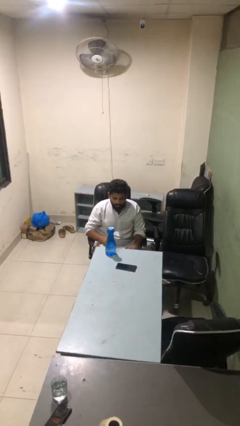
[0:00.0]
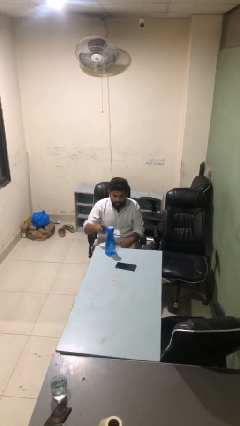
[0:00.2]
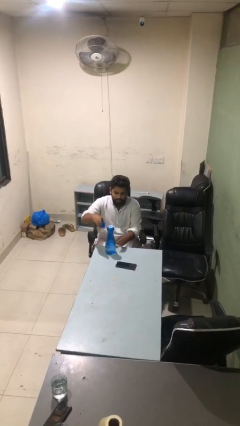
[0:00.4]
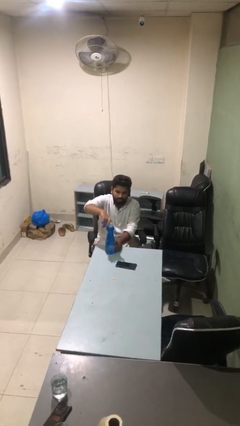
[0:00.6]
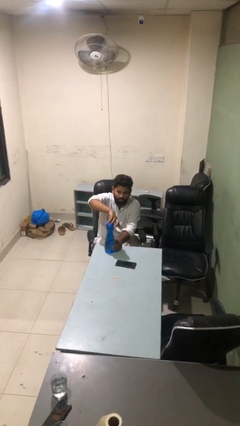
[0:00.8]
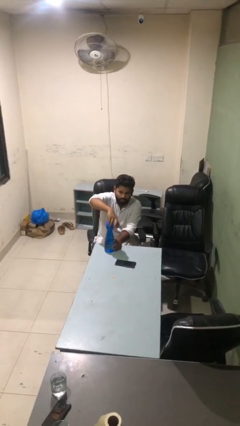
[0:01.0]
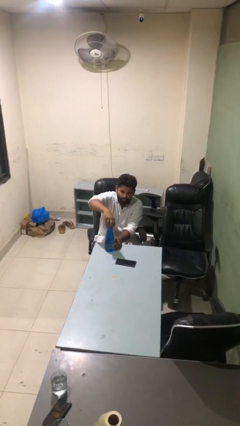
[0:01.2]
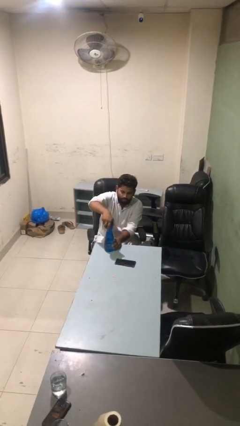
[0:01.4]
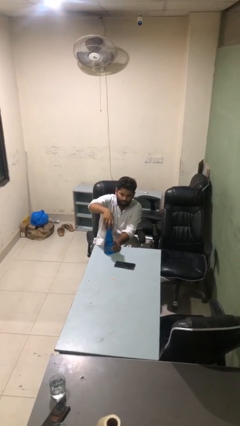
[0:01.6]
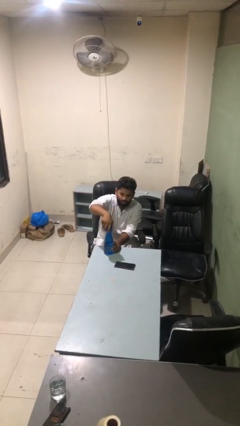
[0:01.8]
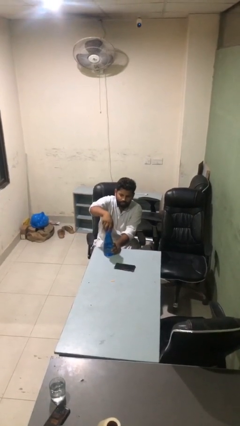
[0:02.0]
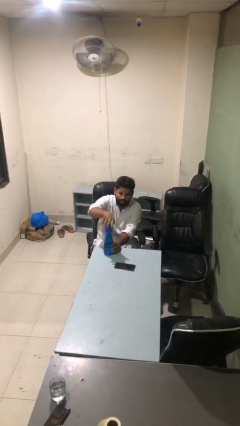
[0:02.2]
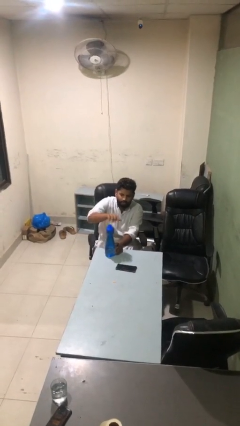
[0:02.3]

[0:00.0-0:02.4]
person screws lid to bottle

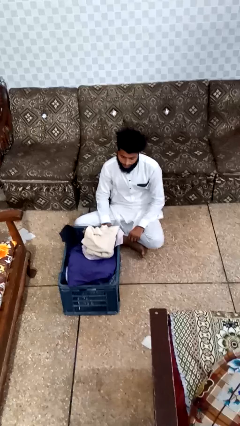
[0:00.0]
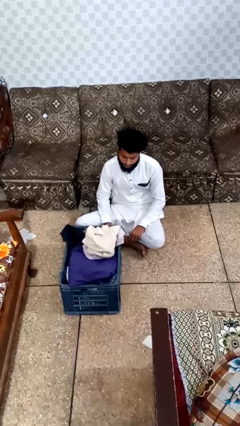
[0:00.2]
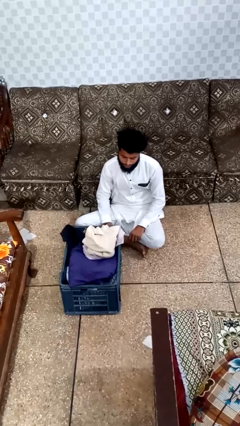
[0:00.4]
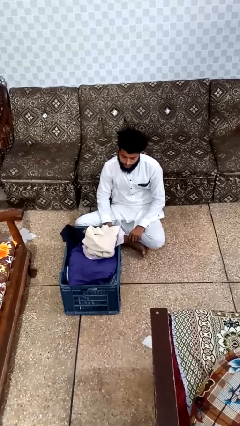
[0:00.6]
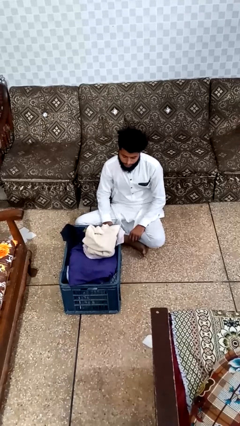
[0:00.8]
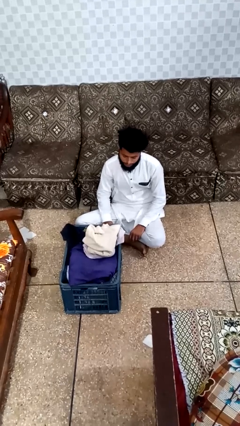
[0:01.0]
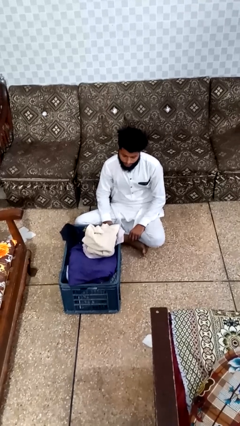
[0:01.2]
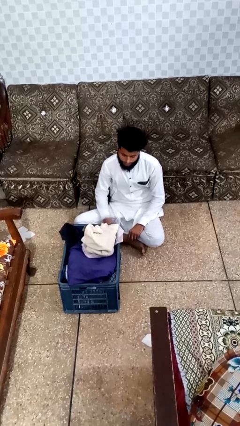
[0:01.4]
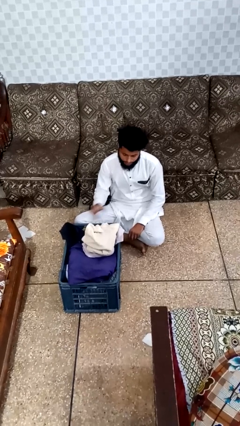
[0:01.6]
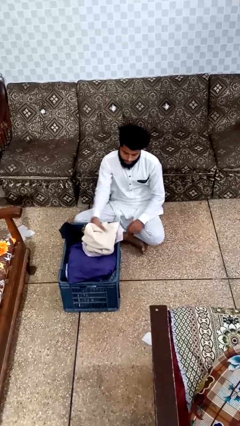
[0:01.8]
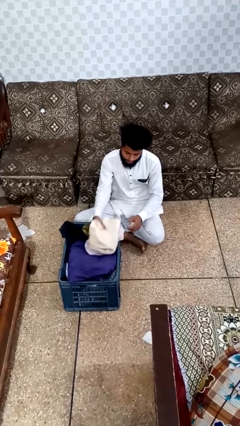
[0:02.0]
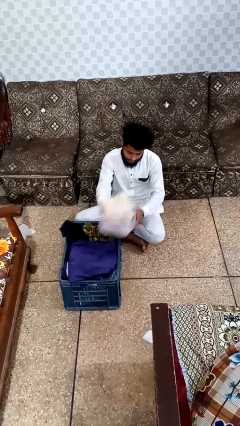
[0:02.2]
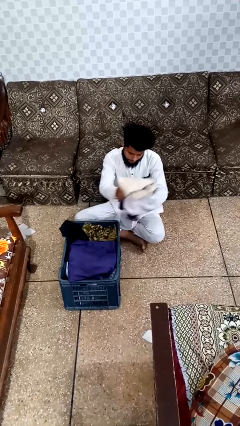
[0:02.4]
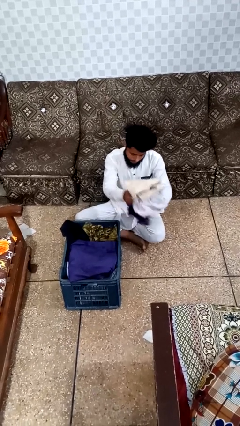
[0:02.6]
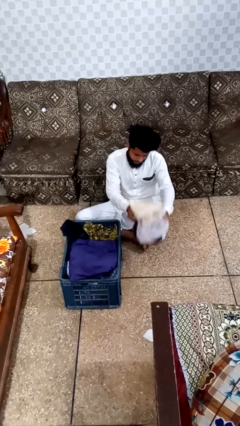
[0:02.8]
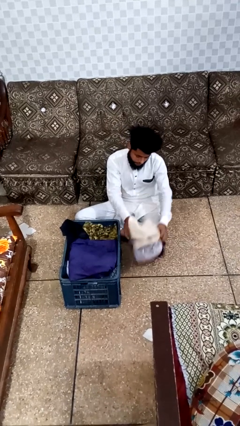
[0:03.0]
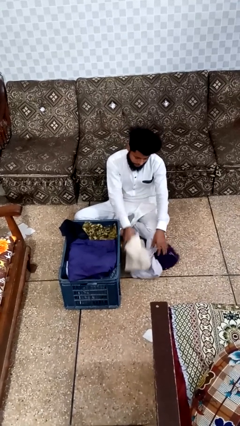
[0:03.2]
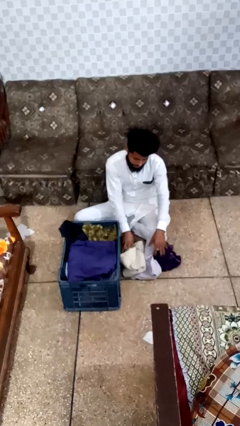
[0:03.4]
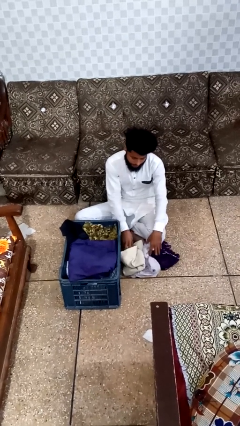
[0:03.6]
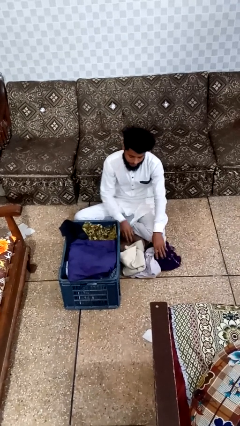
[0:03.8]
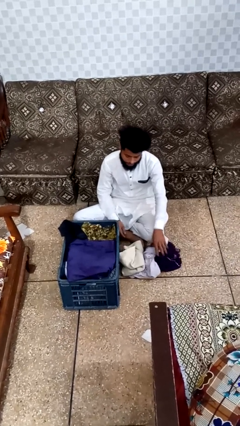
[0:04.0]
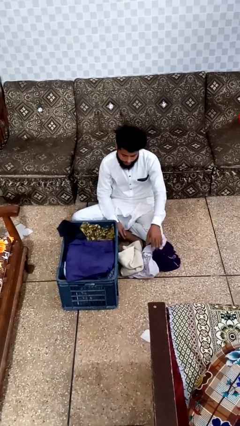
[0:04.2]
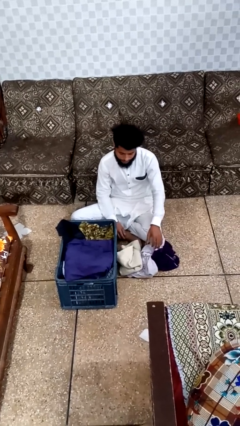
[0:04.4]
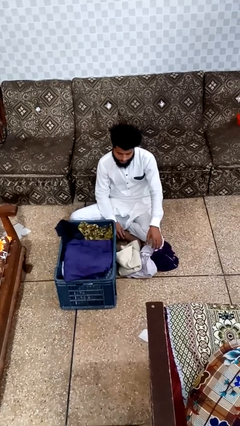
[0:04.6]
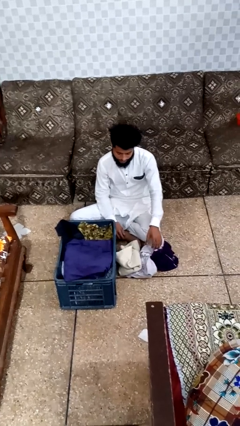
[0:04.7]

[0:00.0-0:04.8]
person puts object into basket

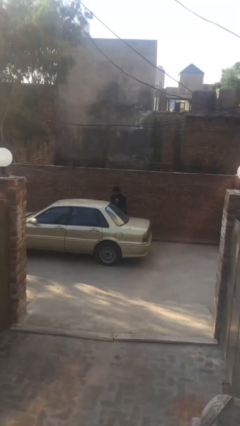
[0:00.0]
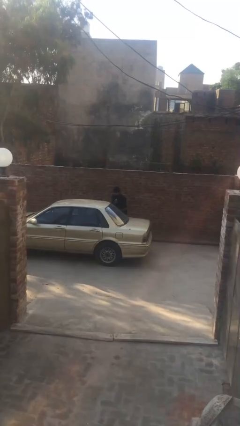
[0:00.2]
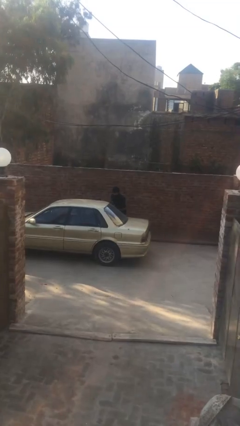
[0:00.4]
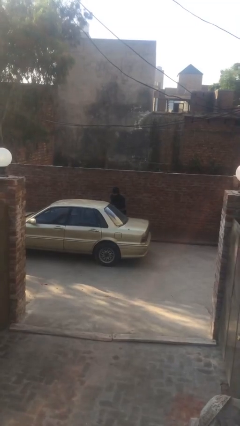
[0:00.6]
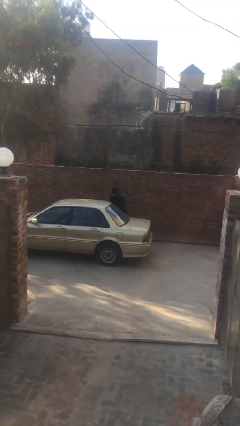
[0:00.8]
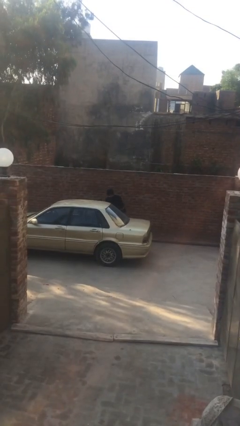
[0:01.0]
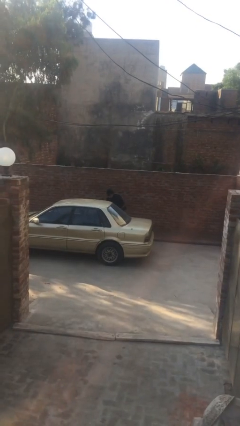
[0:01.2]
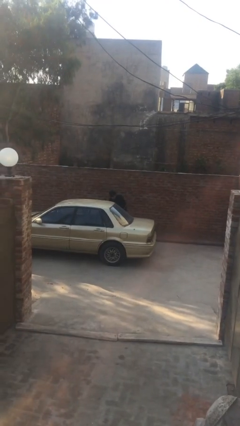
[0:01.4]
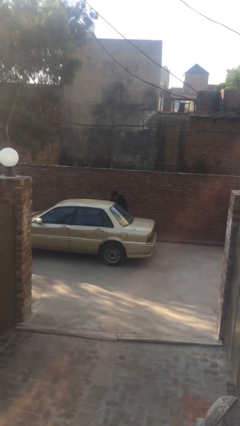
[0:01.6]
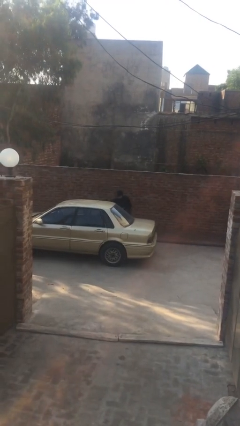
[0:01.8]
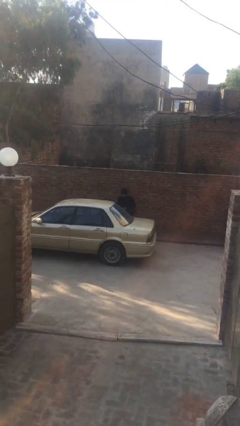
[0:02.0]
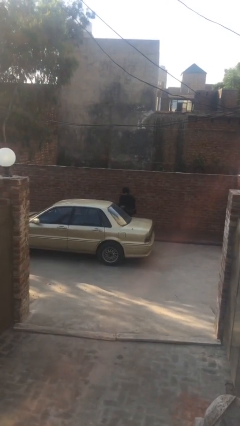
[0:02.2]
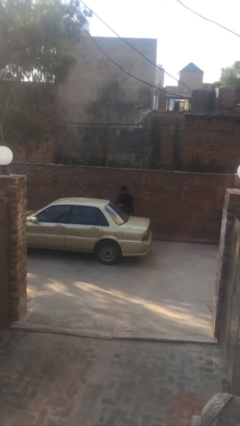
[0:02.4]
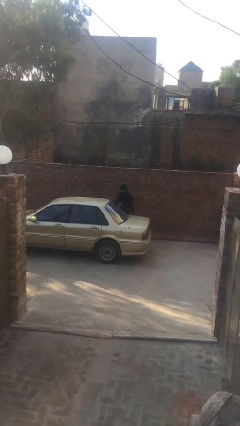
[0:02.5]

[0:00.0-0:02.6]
person loads car

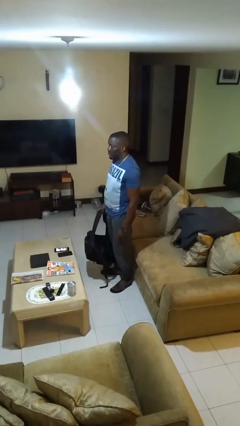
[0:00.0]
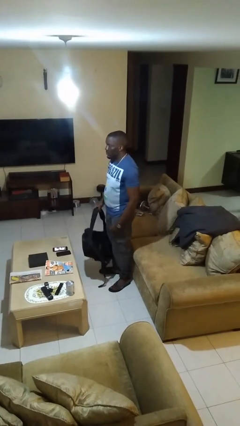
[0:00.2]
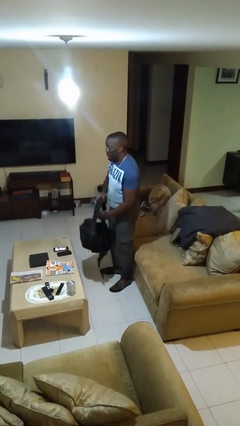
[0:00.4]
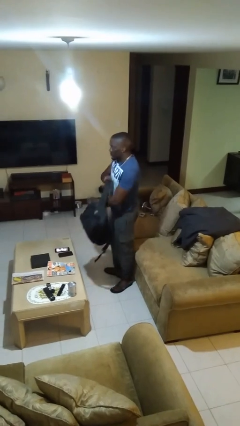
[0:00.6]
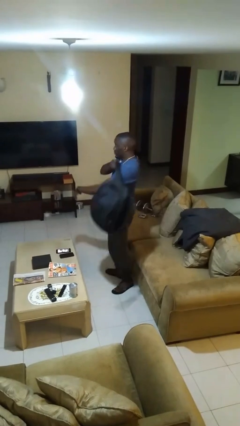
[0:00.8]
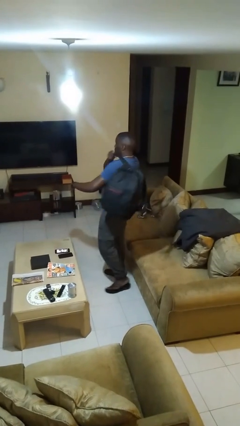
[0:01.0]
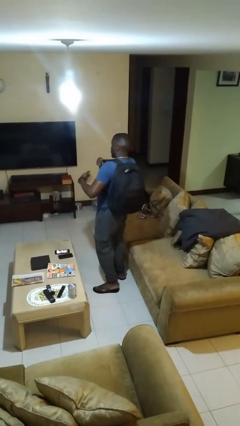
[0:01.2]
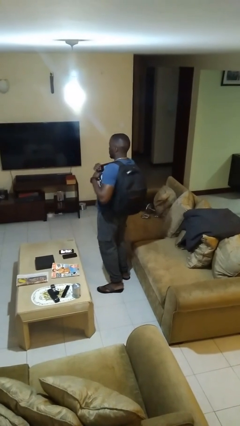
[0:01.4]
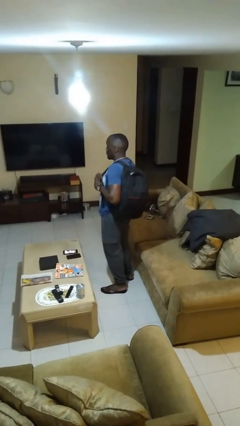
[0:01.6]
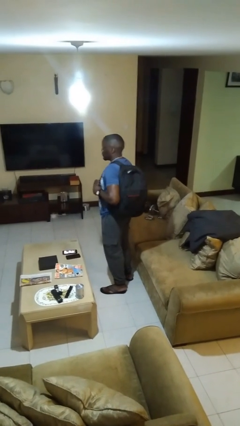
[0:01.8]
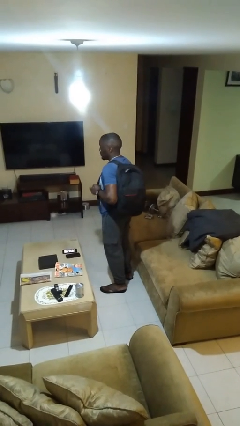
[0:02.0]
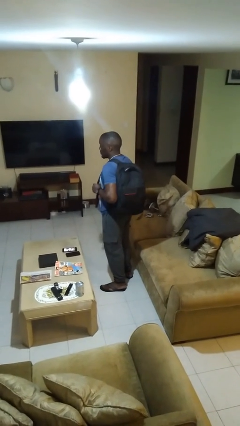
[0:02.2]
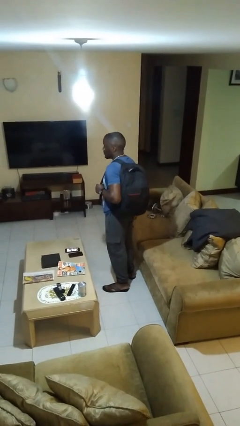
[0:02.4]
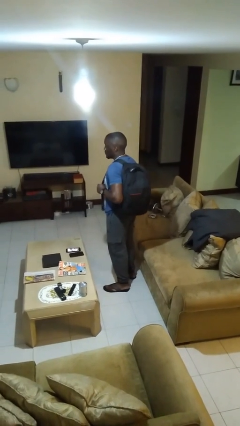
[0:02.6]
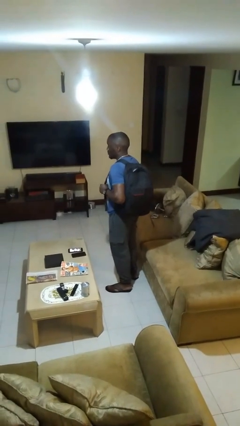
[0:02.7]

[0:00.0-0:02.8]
person puts on backpack

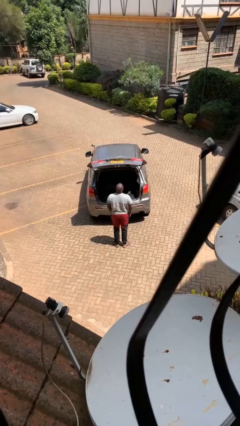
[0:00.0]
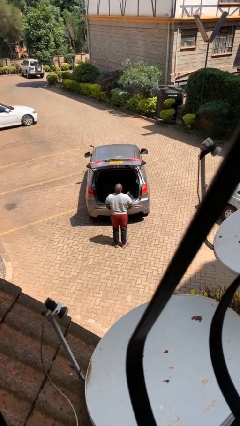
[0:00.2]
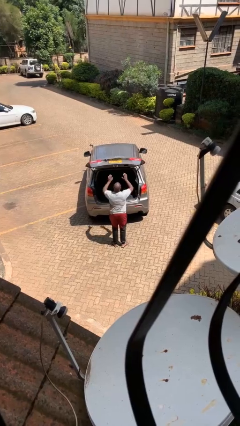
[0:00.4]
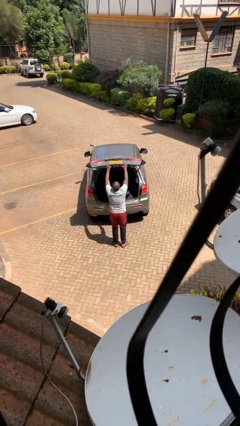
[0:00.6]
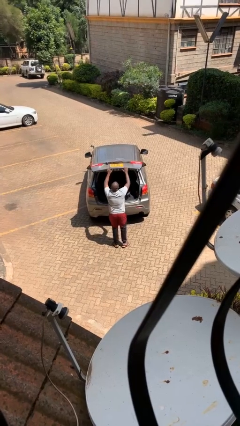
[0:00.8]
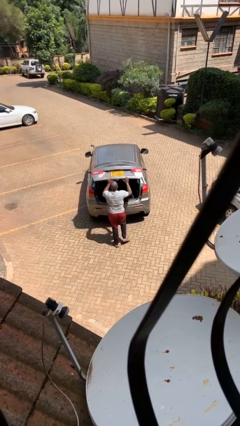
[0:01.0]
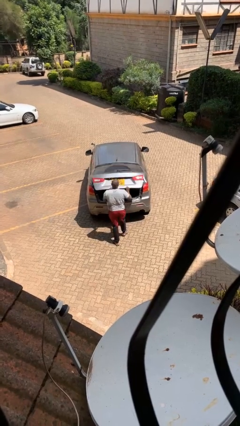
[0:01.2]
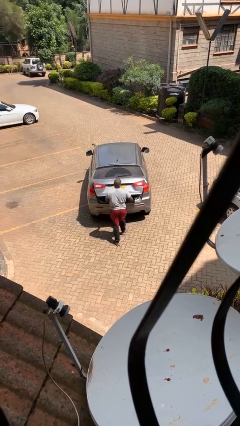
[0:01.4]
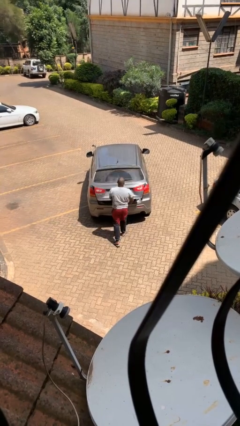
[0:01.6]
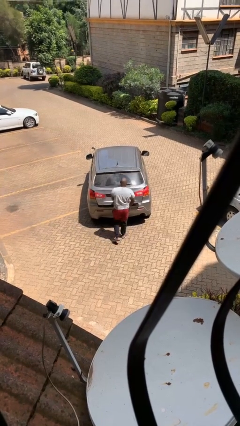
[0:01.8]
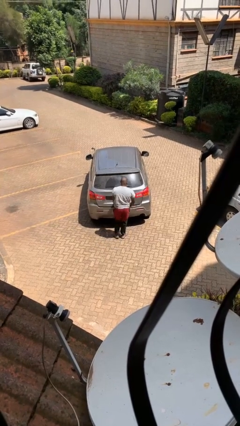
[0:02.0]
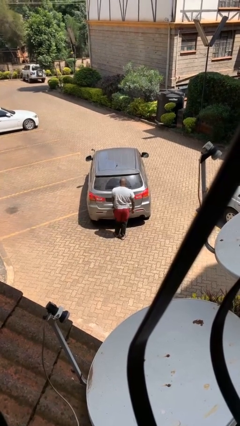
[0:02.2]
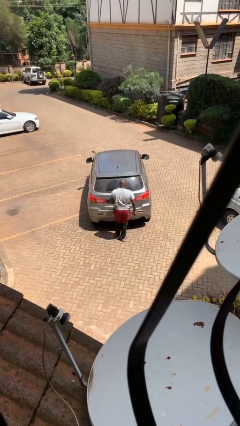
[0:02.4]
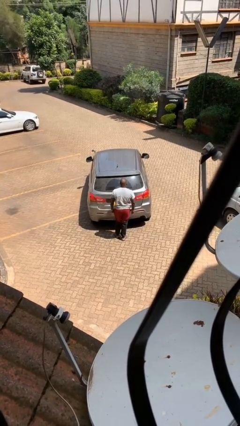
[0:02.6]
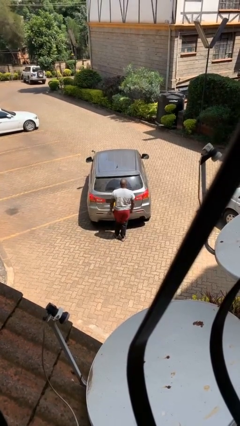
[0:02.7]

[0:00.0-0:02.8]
person closes car trunk

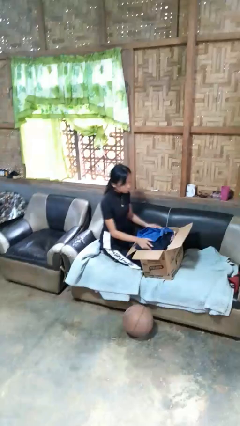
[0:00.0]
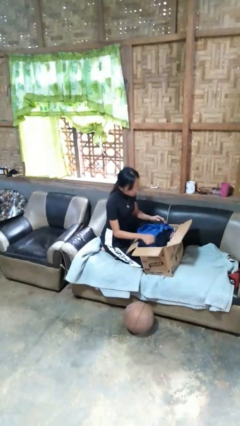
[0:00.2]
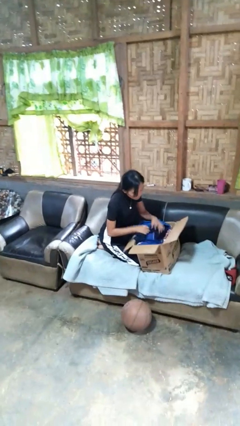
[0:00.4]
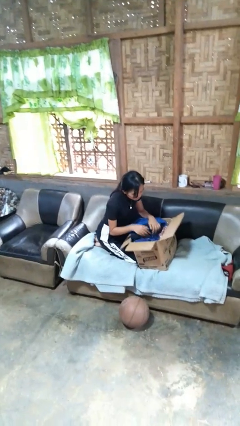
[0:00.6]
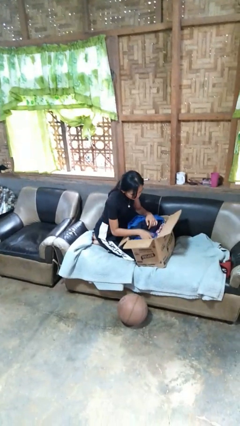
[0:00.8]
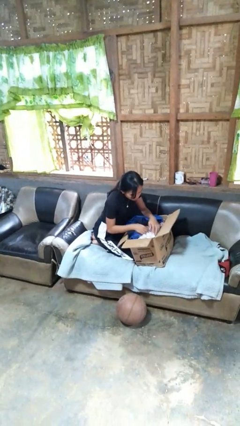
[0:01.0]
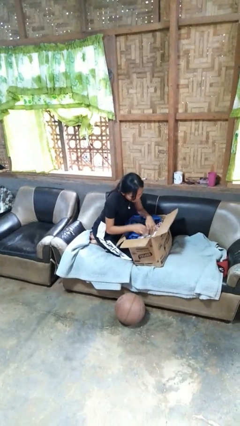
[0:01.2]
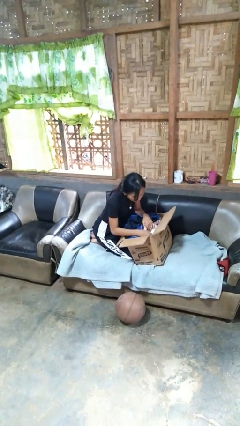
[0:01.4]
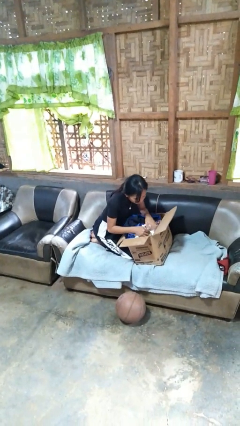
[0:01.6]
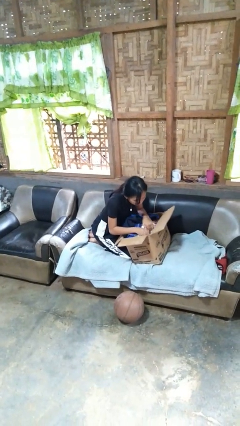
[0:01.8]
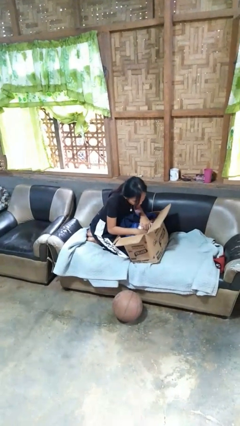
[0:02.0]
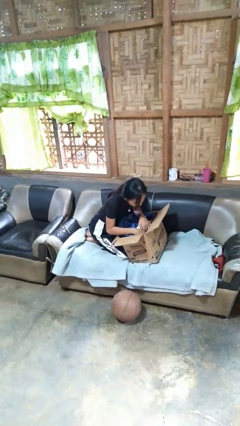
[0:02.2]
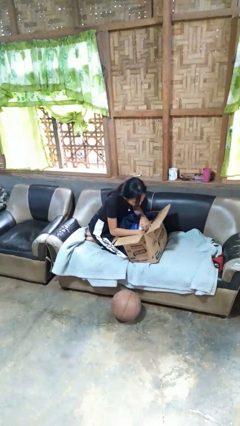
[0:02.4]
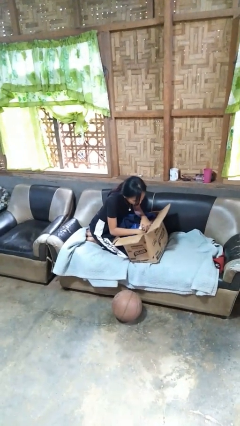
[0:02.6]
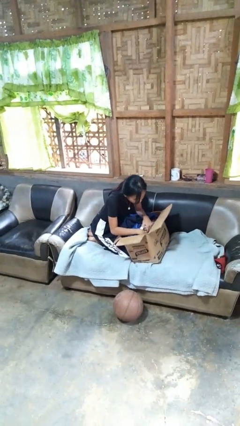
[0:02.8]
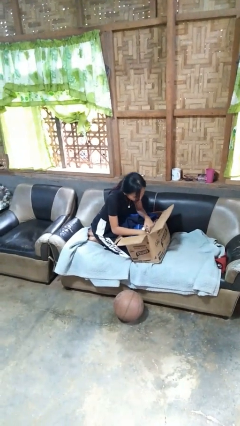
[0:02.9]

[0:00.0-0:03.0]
person searches in box
